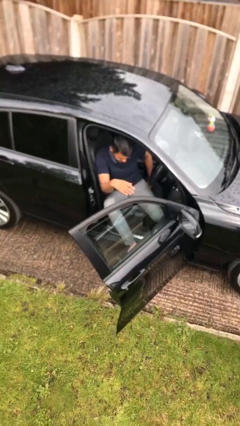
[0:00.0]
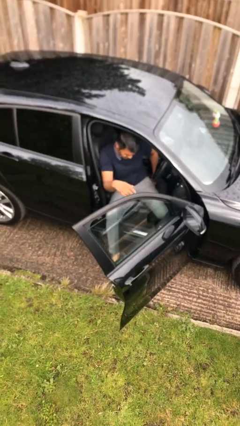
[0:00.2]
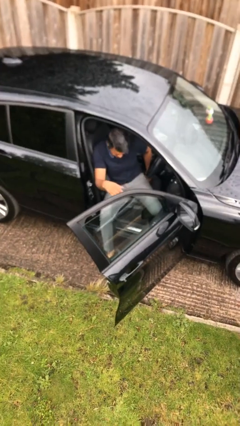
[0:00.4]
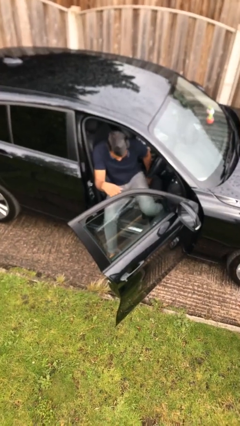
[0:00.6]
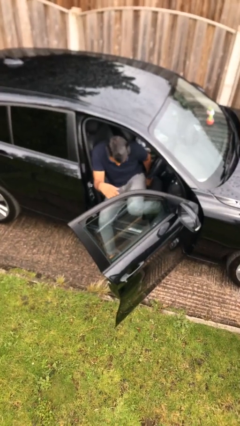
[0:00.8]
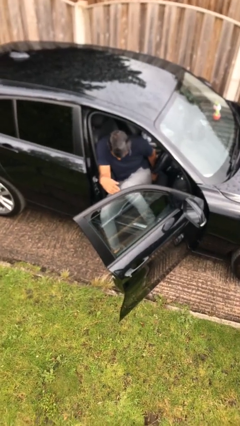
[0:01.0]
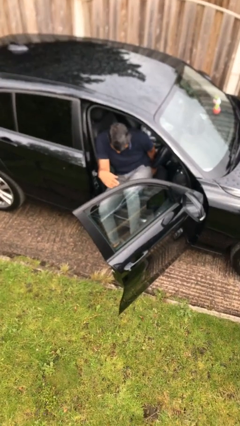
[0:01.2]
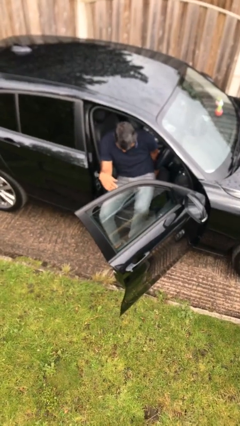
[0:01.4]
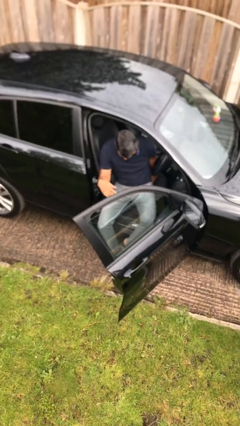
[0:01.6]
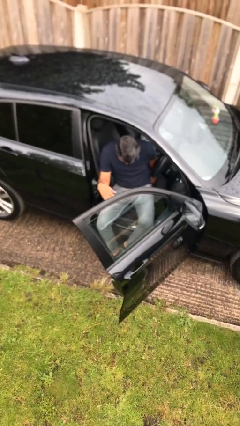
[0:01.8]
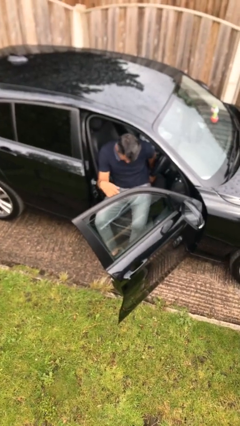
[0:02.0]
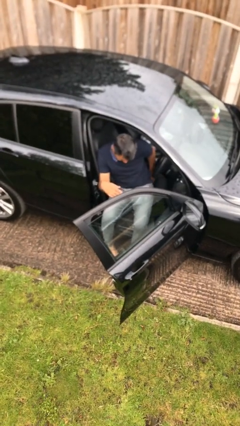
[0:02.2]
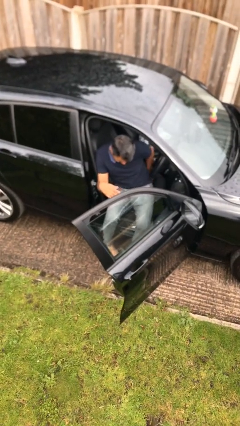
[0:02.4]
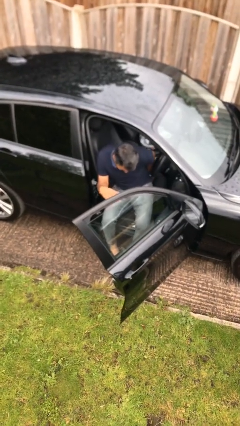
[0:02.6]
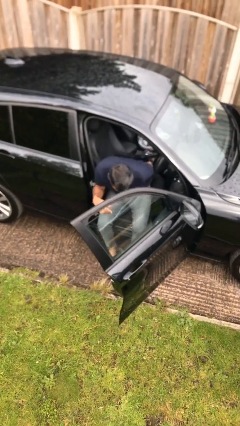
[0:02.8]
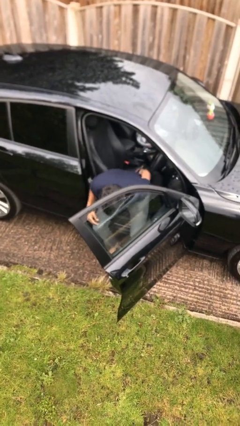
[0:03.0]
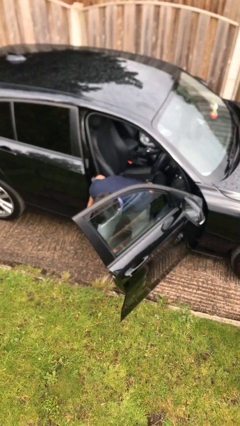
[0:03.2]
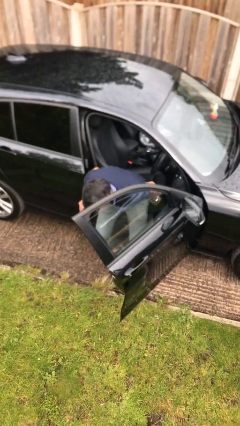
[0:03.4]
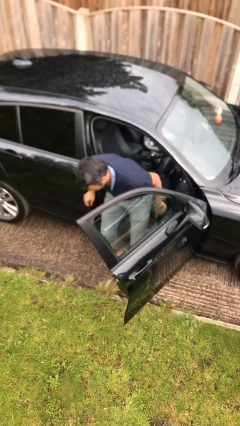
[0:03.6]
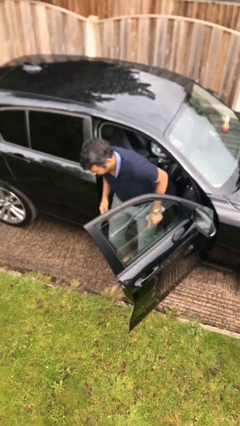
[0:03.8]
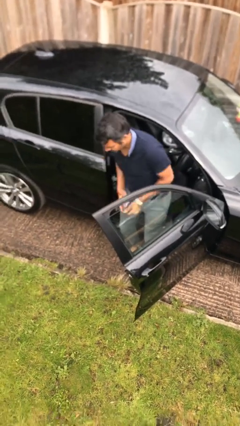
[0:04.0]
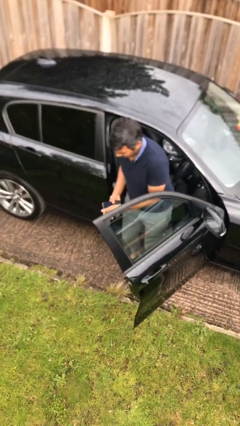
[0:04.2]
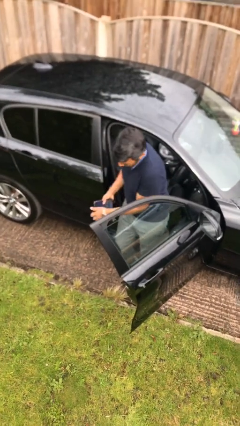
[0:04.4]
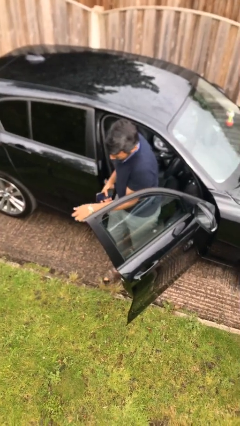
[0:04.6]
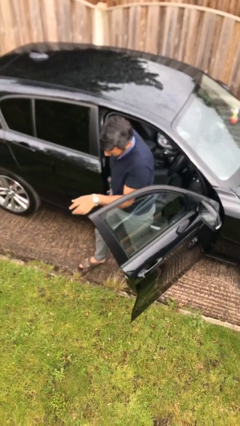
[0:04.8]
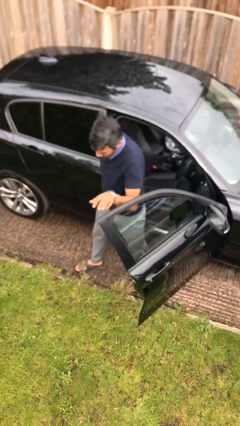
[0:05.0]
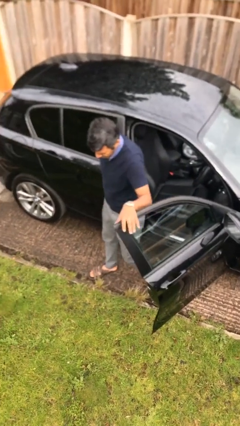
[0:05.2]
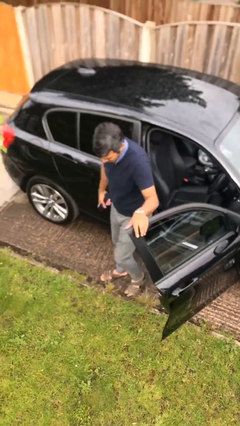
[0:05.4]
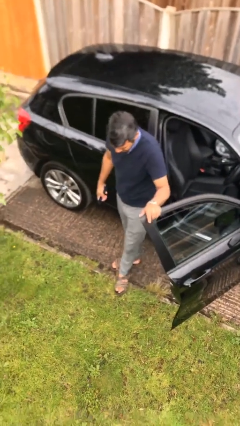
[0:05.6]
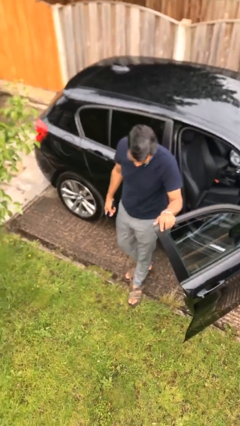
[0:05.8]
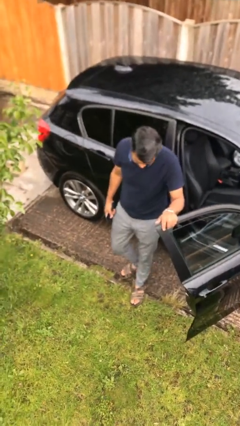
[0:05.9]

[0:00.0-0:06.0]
person exits car

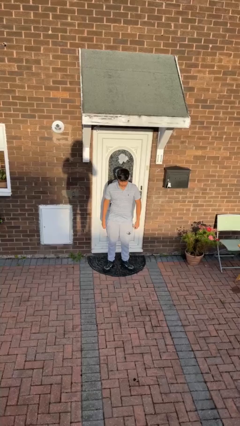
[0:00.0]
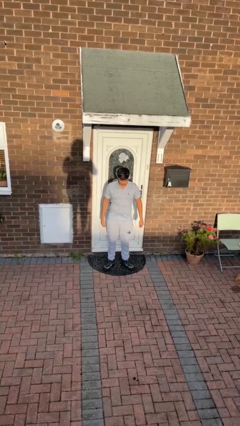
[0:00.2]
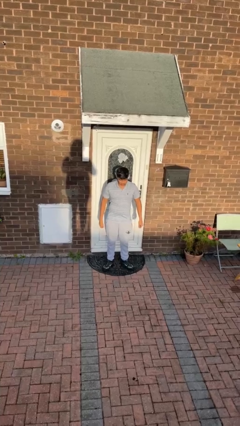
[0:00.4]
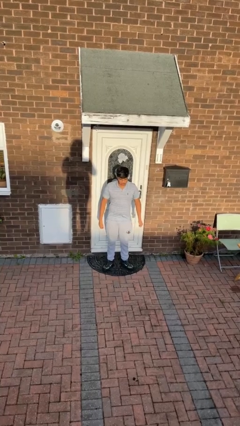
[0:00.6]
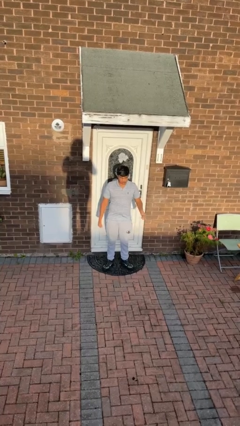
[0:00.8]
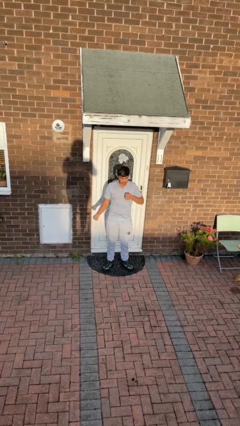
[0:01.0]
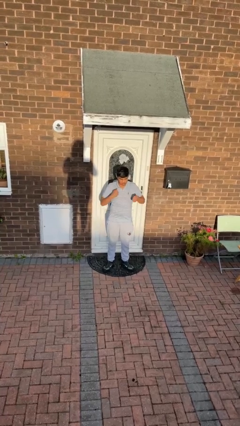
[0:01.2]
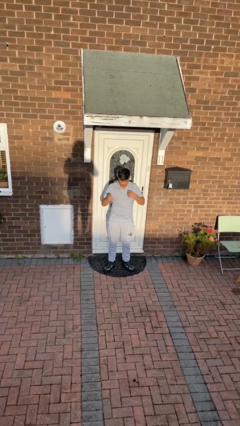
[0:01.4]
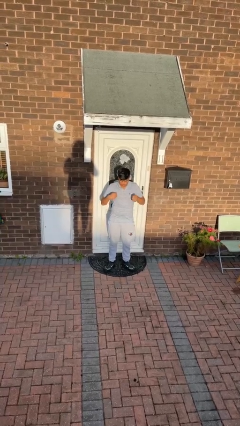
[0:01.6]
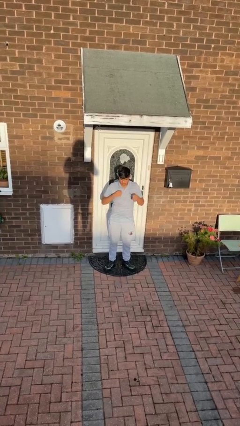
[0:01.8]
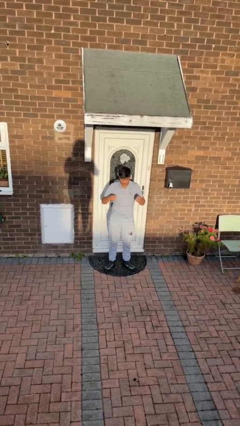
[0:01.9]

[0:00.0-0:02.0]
person drums on chest

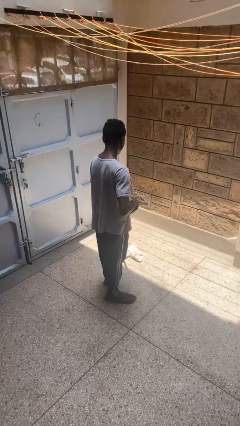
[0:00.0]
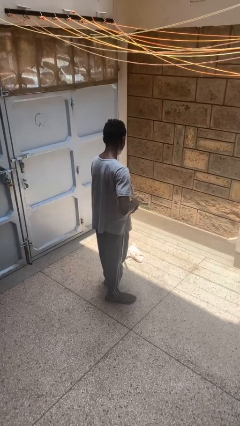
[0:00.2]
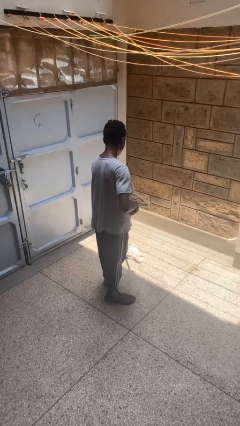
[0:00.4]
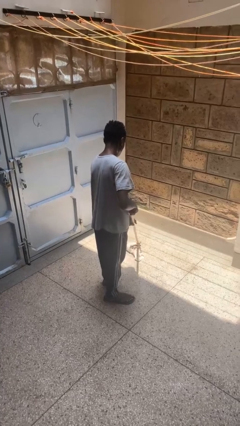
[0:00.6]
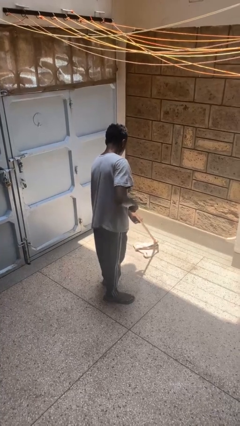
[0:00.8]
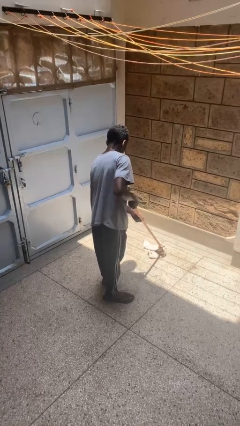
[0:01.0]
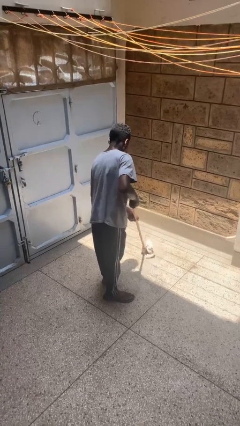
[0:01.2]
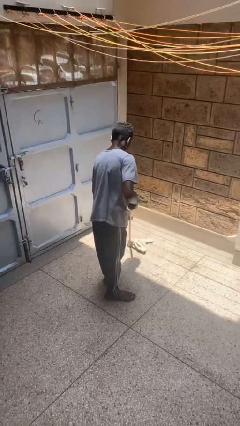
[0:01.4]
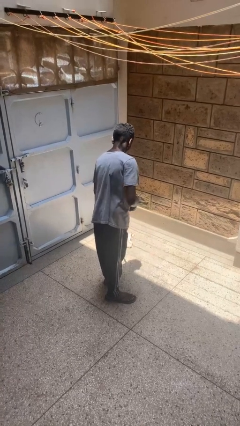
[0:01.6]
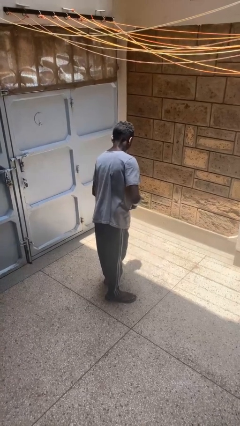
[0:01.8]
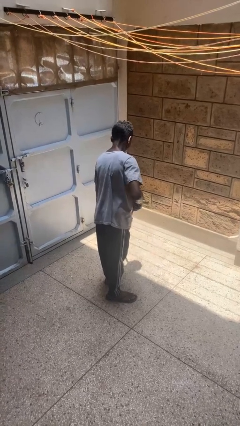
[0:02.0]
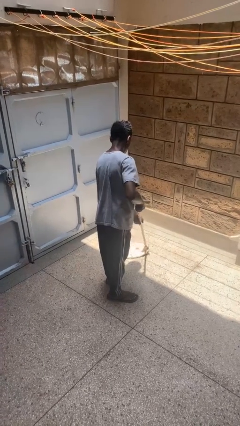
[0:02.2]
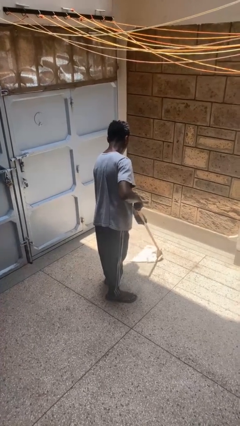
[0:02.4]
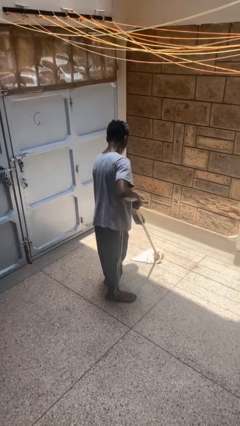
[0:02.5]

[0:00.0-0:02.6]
person mops

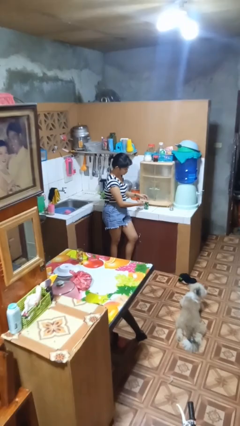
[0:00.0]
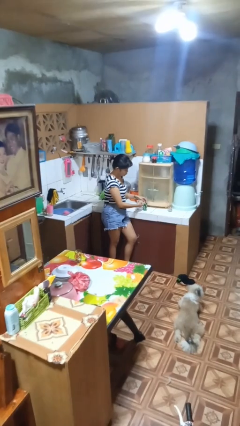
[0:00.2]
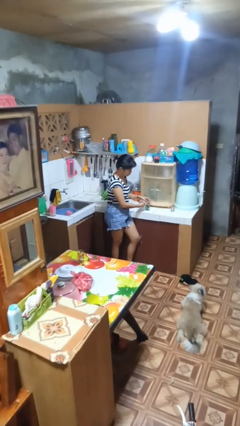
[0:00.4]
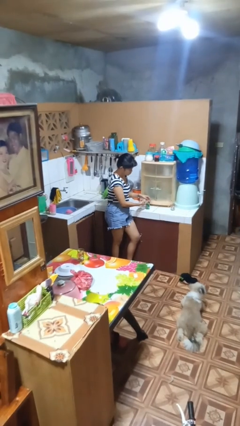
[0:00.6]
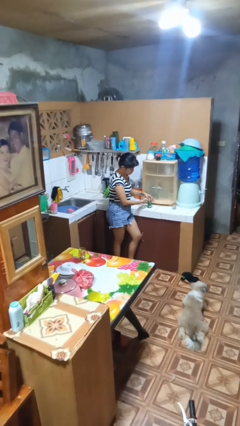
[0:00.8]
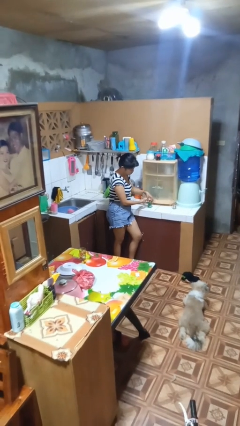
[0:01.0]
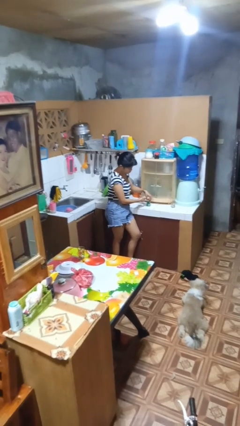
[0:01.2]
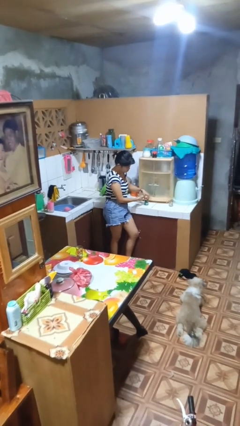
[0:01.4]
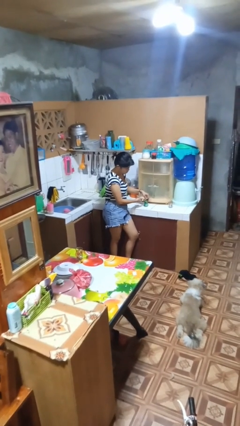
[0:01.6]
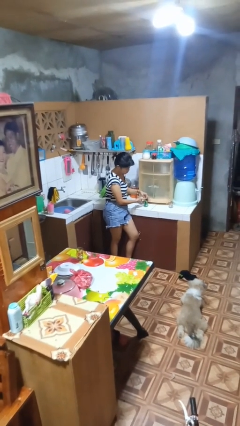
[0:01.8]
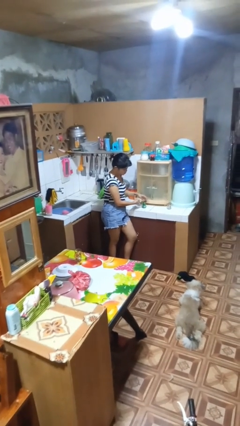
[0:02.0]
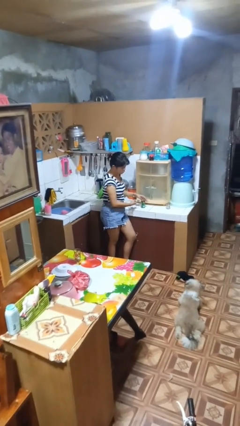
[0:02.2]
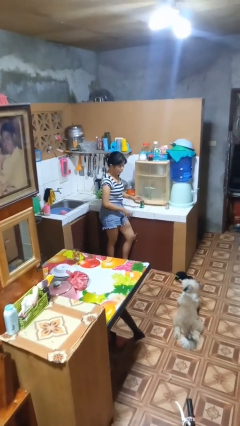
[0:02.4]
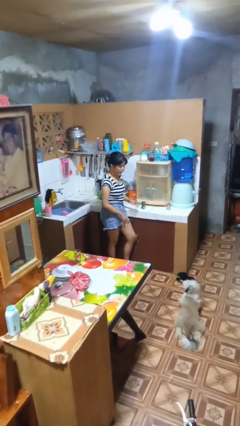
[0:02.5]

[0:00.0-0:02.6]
person opens can with can opener

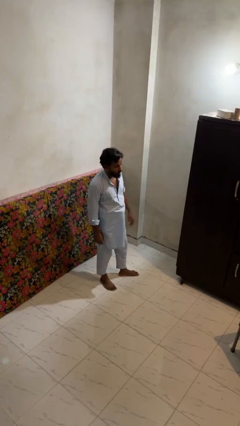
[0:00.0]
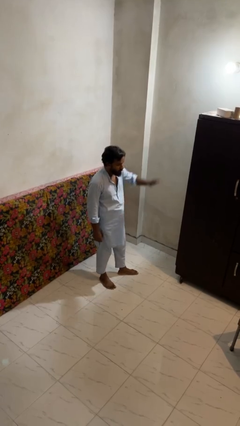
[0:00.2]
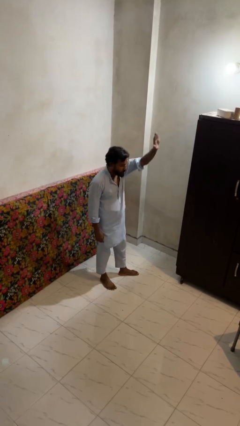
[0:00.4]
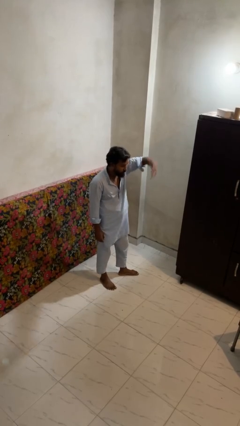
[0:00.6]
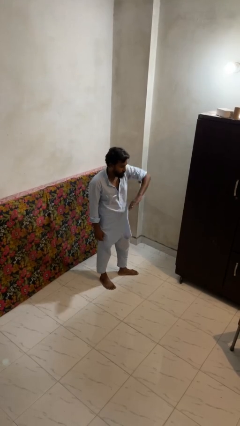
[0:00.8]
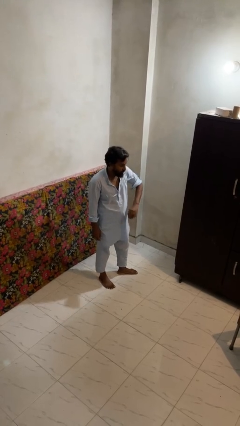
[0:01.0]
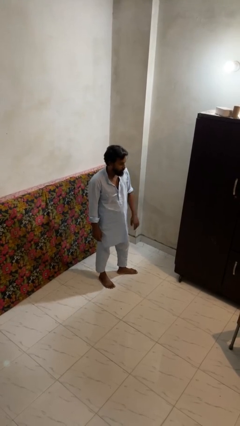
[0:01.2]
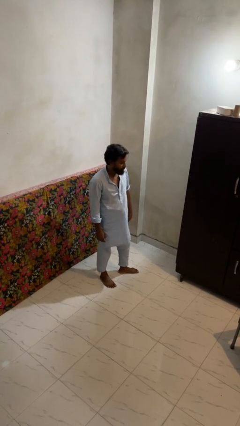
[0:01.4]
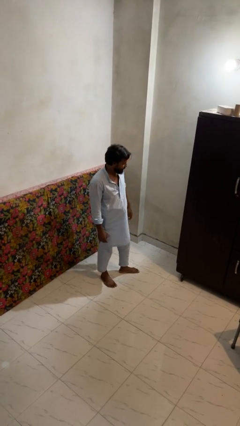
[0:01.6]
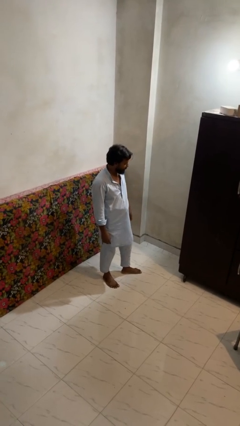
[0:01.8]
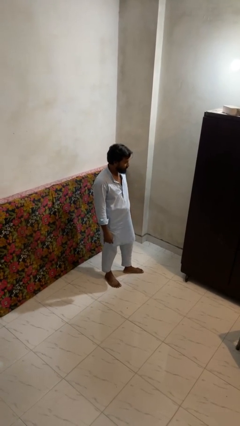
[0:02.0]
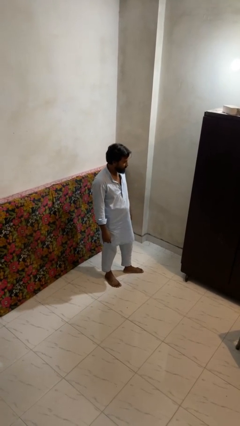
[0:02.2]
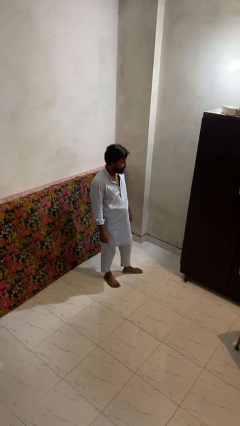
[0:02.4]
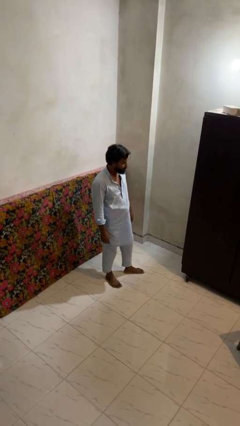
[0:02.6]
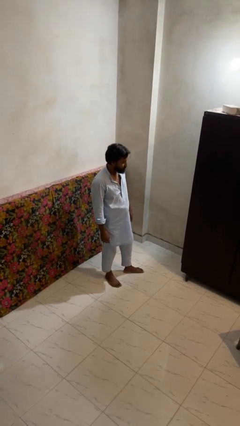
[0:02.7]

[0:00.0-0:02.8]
person gestures swipe down

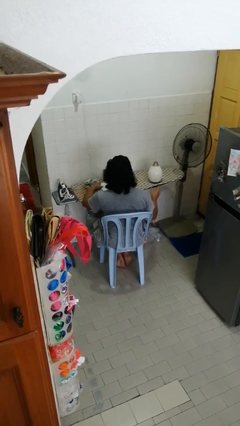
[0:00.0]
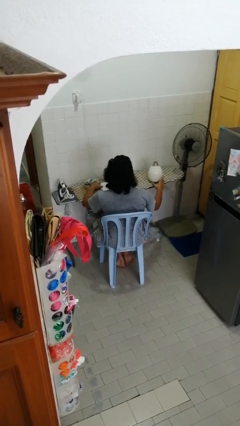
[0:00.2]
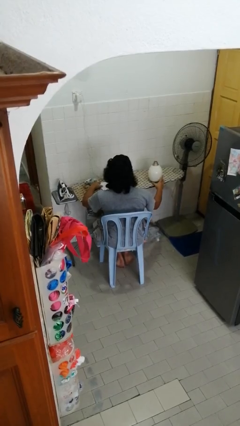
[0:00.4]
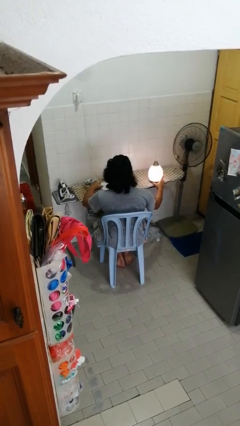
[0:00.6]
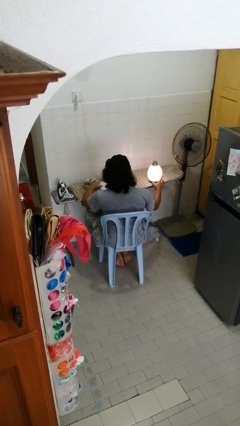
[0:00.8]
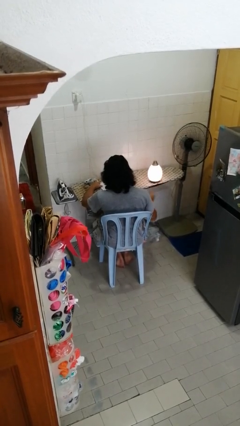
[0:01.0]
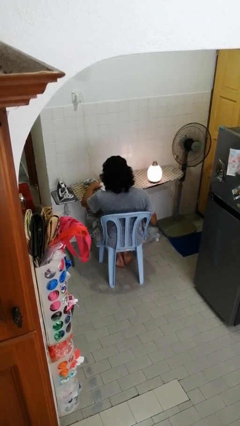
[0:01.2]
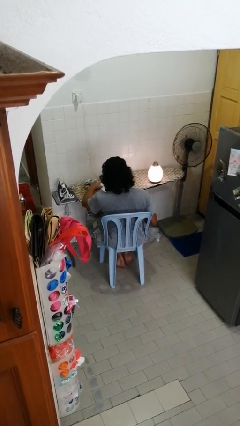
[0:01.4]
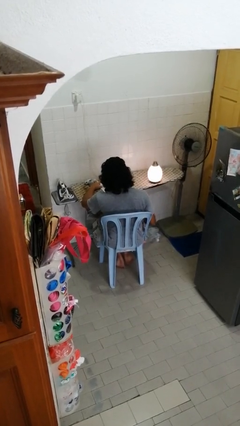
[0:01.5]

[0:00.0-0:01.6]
person turns on lamp
